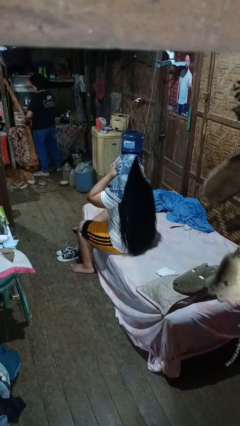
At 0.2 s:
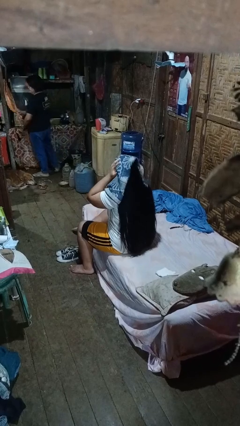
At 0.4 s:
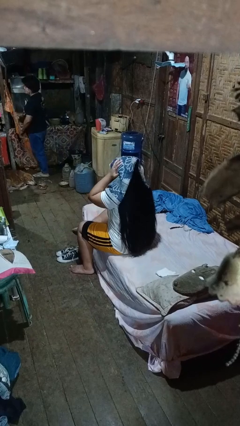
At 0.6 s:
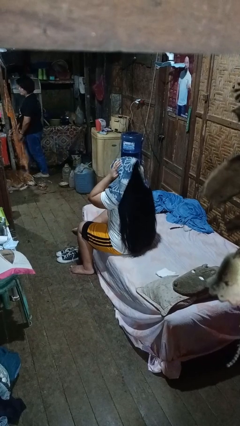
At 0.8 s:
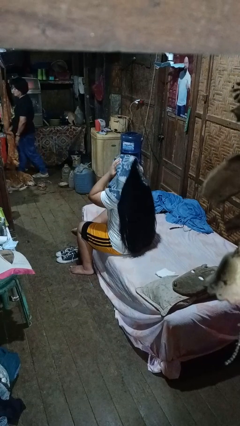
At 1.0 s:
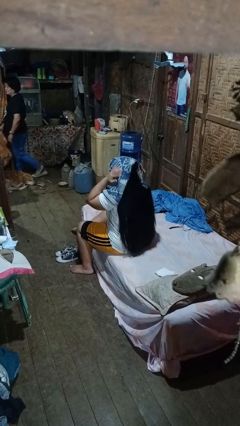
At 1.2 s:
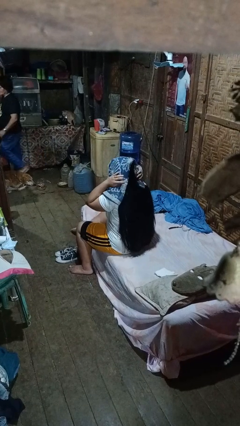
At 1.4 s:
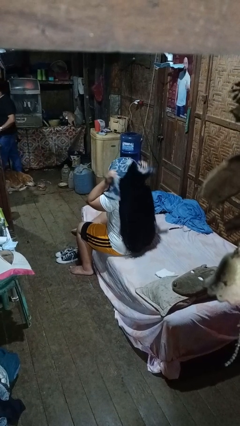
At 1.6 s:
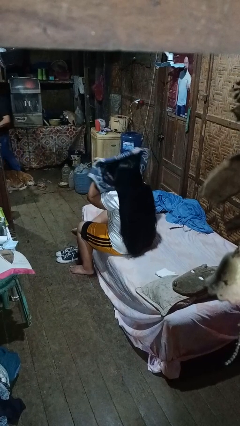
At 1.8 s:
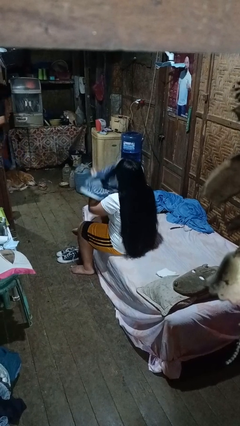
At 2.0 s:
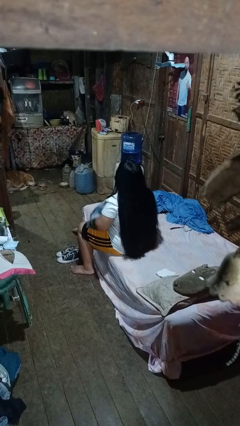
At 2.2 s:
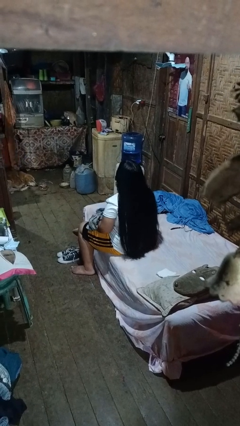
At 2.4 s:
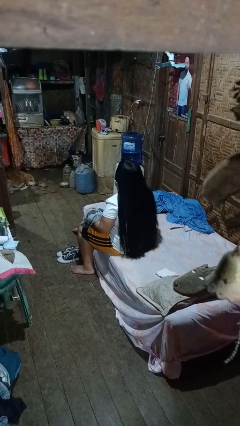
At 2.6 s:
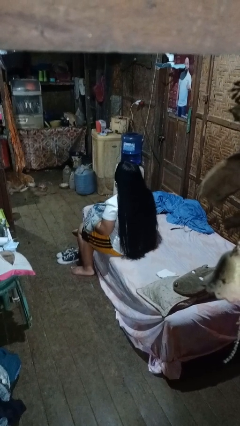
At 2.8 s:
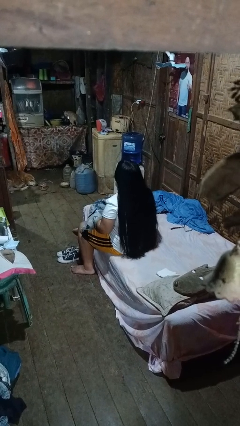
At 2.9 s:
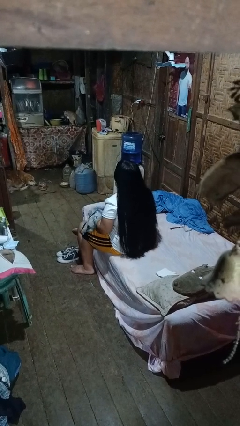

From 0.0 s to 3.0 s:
person dries hair with towel

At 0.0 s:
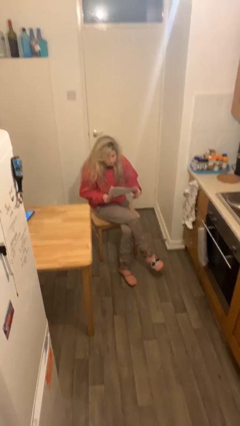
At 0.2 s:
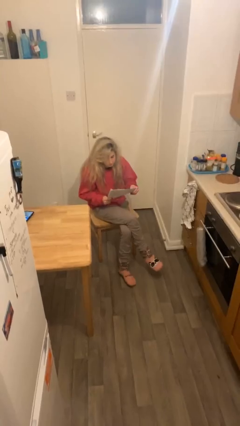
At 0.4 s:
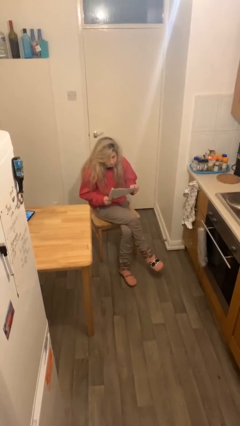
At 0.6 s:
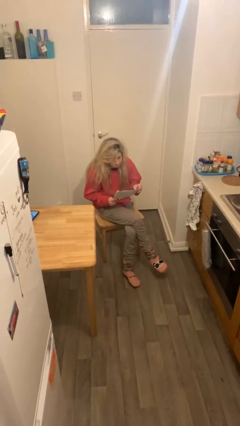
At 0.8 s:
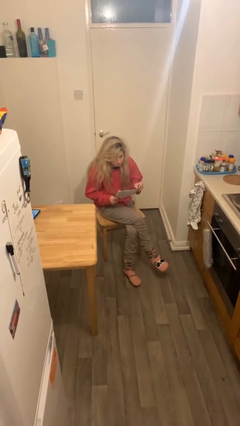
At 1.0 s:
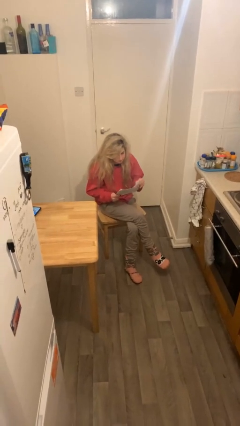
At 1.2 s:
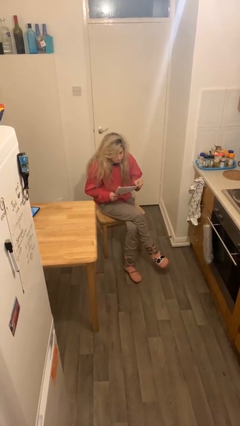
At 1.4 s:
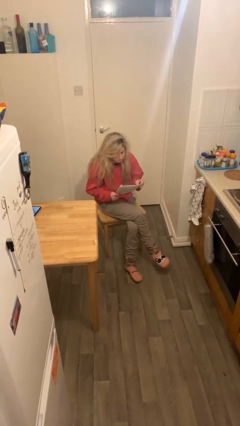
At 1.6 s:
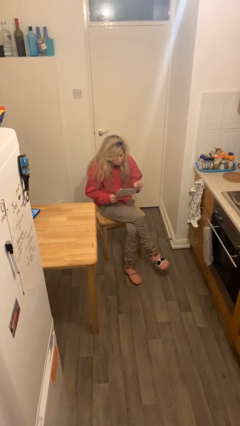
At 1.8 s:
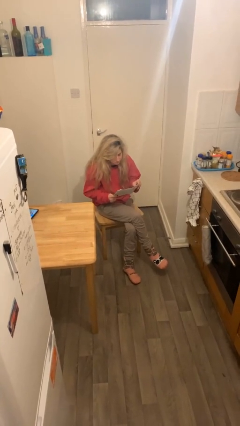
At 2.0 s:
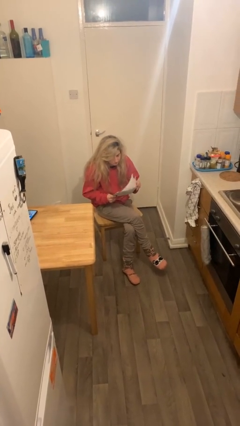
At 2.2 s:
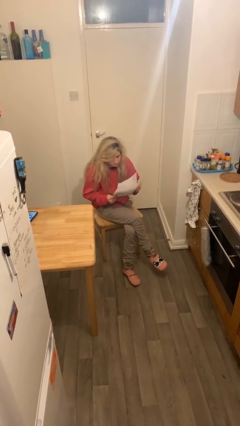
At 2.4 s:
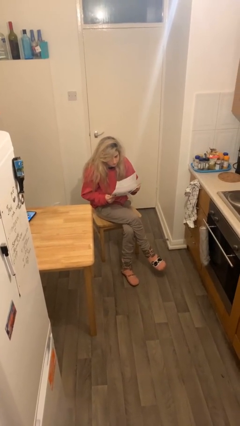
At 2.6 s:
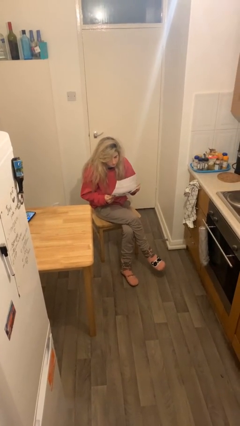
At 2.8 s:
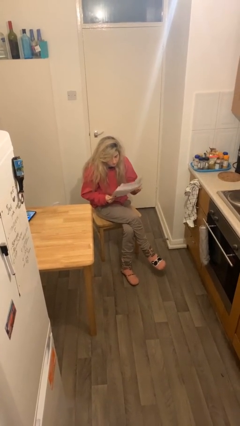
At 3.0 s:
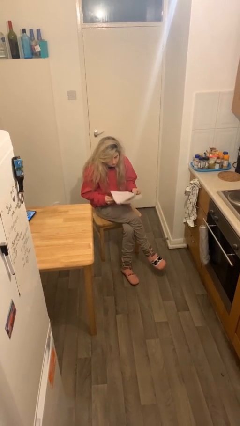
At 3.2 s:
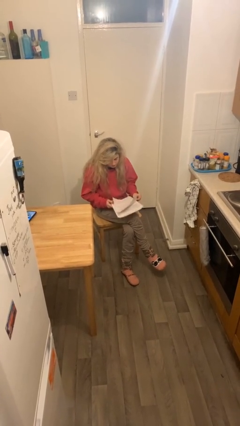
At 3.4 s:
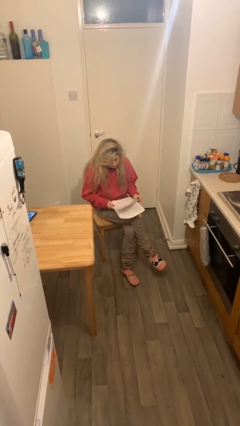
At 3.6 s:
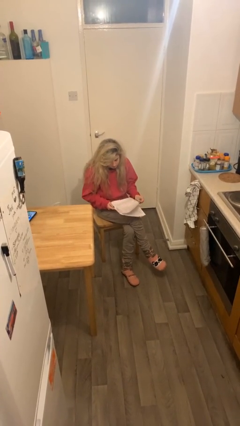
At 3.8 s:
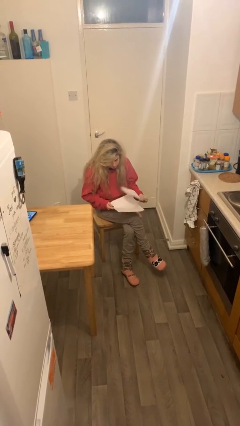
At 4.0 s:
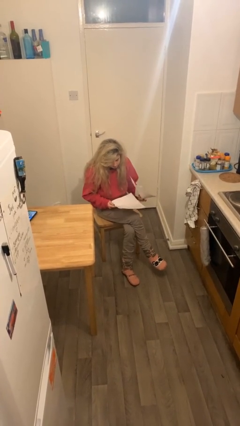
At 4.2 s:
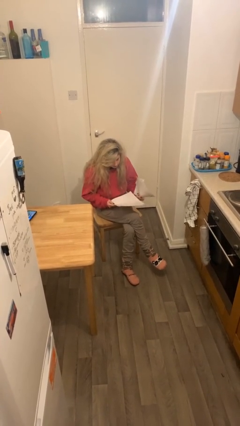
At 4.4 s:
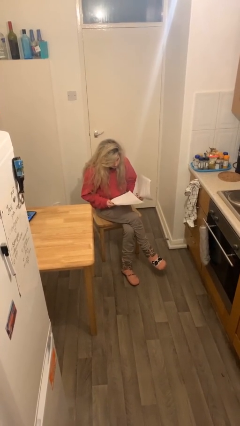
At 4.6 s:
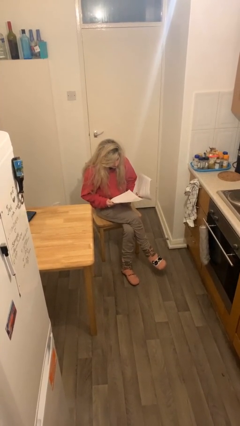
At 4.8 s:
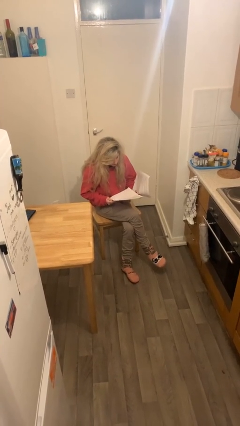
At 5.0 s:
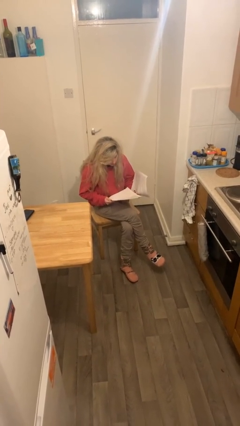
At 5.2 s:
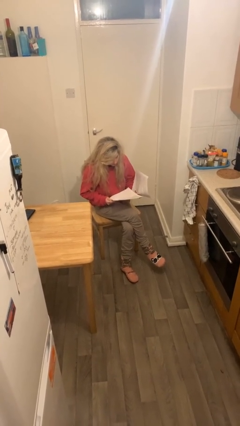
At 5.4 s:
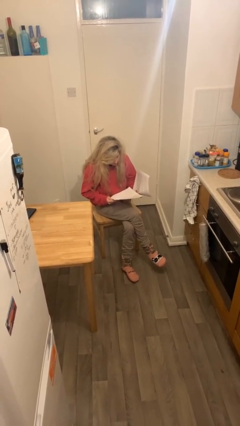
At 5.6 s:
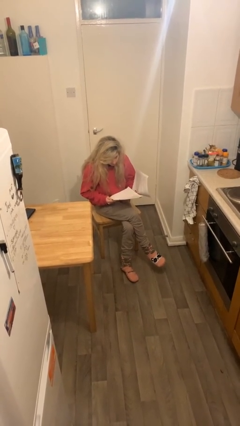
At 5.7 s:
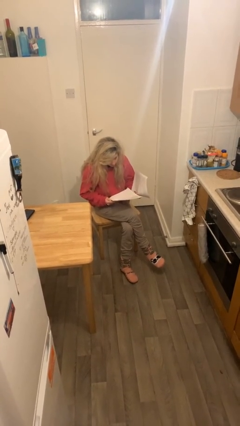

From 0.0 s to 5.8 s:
person reads document

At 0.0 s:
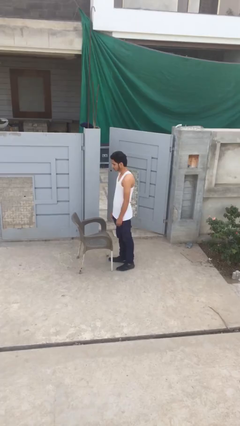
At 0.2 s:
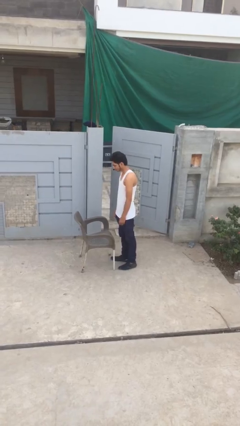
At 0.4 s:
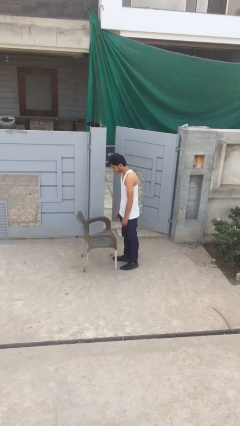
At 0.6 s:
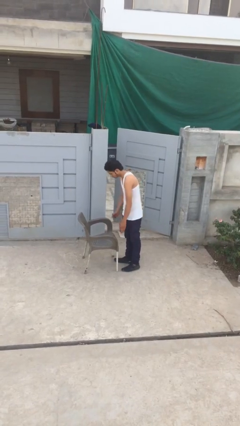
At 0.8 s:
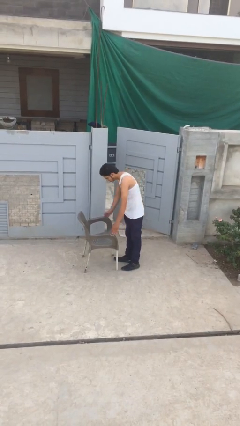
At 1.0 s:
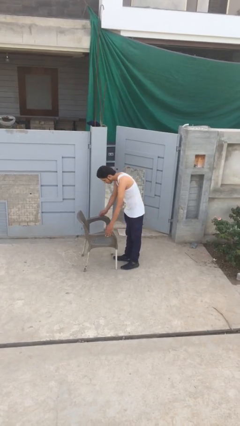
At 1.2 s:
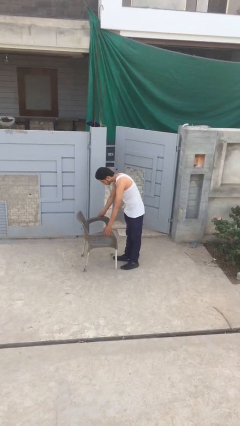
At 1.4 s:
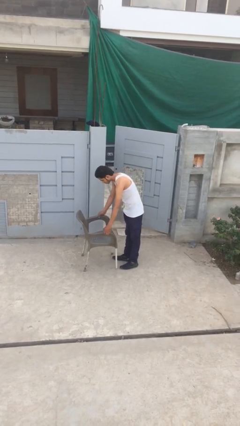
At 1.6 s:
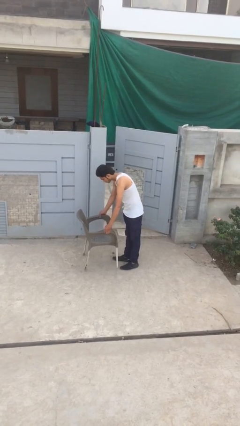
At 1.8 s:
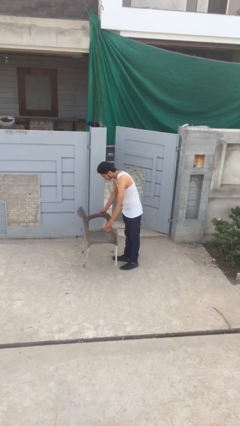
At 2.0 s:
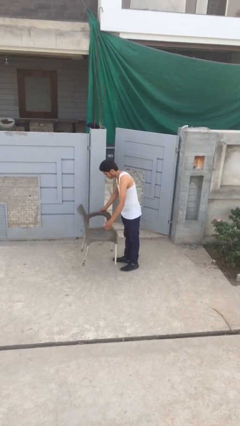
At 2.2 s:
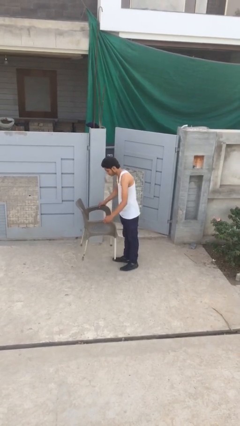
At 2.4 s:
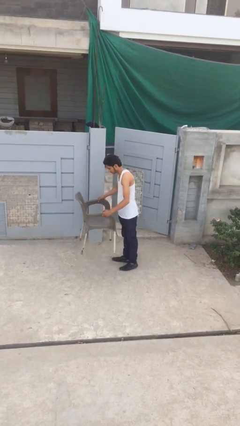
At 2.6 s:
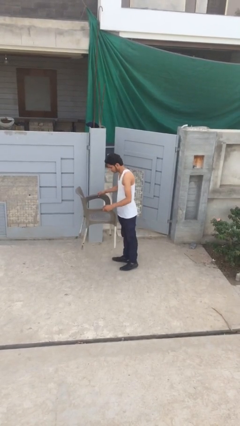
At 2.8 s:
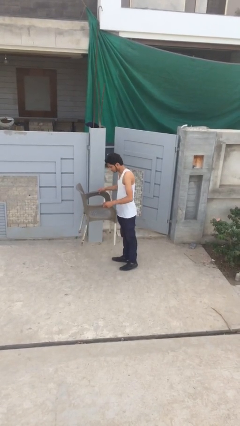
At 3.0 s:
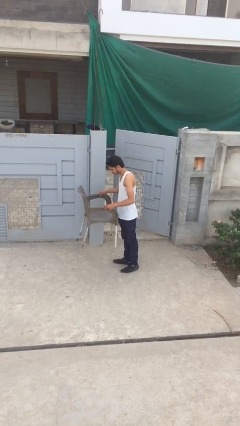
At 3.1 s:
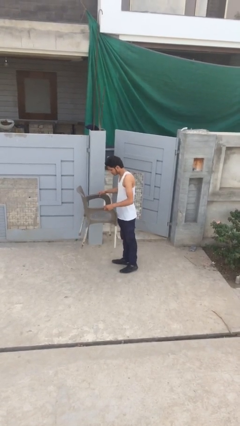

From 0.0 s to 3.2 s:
person picks up object from floor

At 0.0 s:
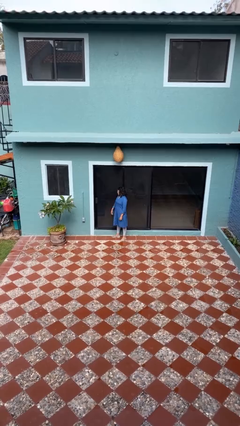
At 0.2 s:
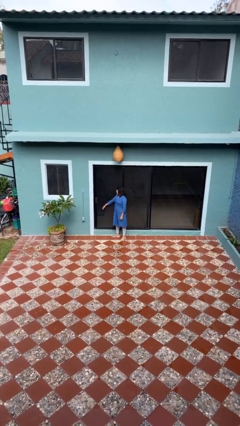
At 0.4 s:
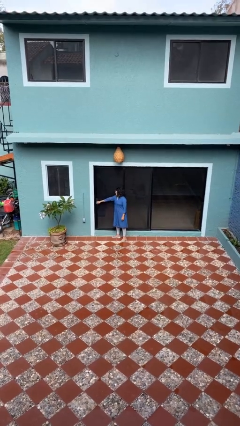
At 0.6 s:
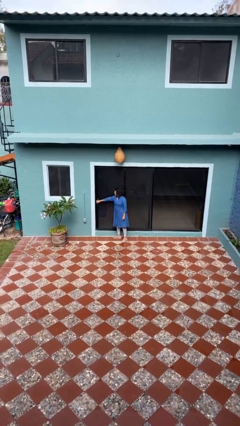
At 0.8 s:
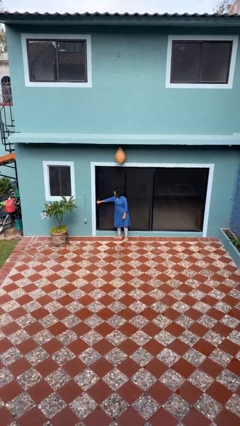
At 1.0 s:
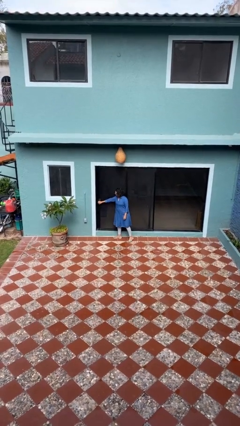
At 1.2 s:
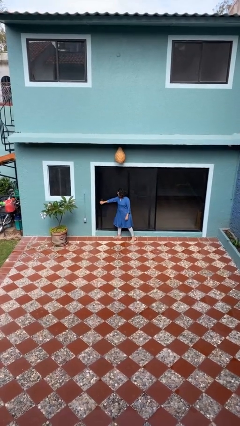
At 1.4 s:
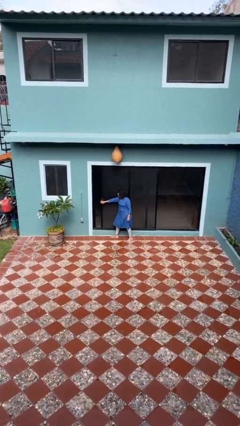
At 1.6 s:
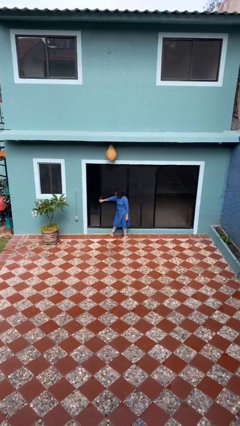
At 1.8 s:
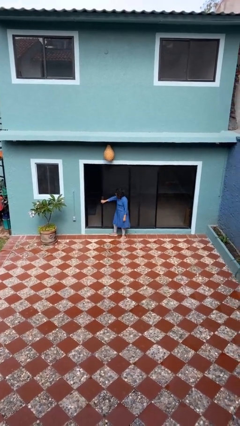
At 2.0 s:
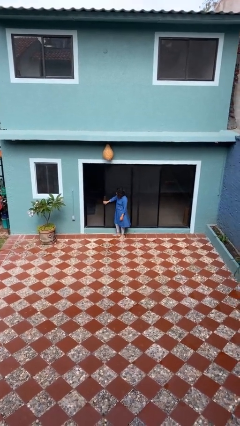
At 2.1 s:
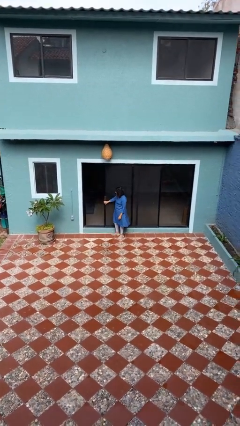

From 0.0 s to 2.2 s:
person opens sliding door

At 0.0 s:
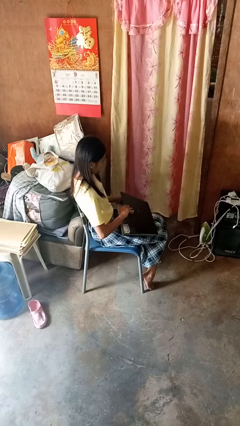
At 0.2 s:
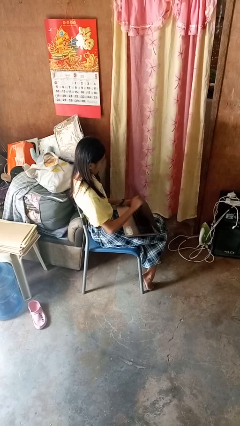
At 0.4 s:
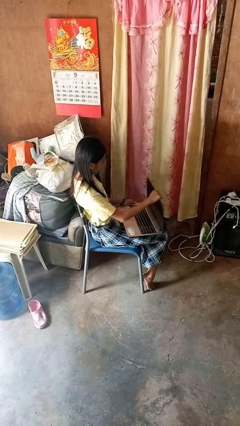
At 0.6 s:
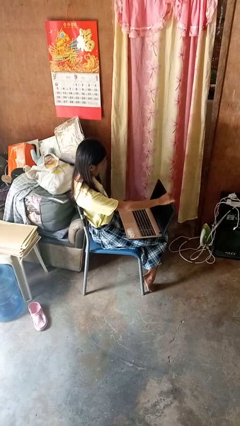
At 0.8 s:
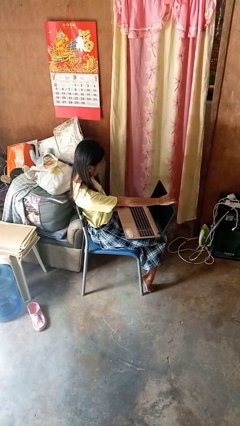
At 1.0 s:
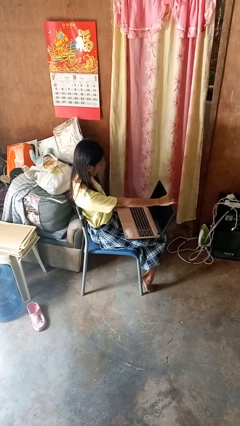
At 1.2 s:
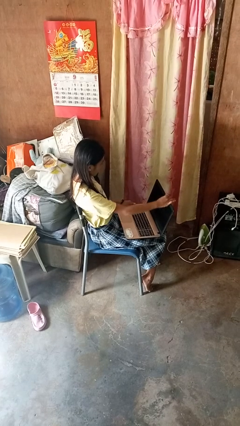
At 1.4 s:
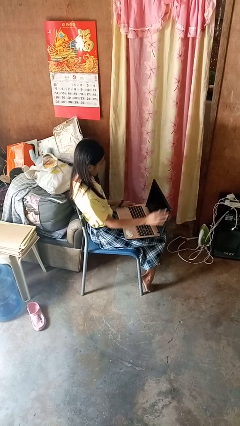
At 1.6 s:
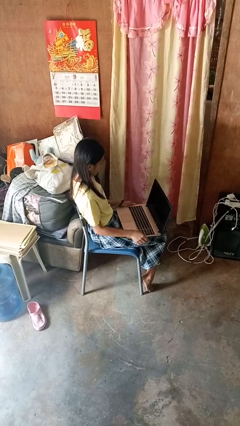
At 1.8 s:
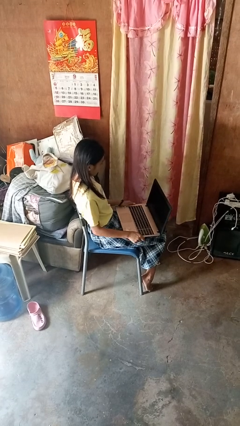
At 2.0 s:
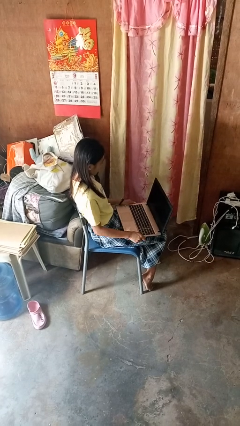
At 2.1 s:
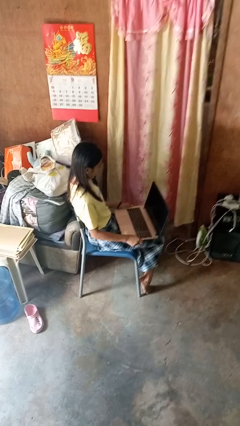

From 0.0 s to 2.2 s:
person opens laptop

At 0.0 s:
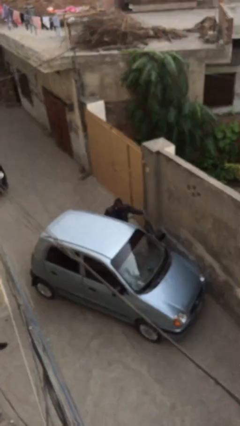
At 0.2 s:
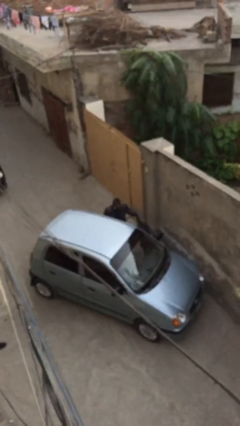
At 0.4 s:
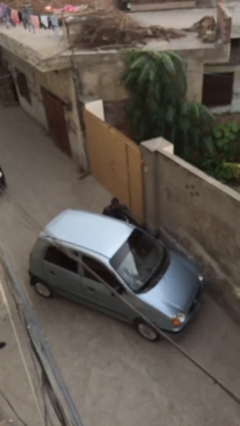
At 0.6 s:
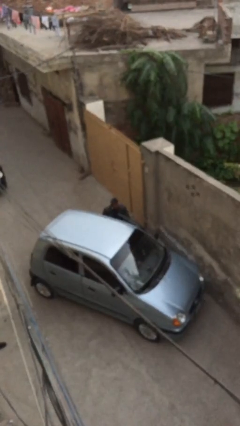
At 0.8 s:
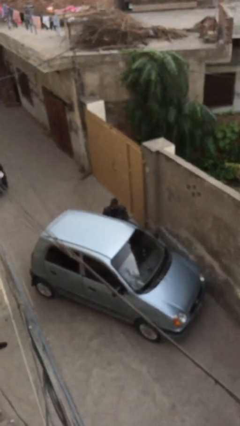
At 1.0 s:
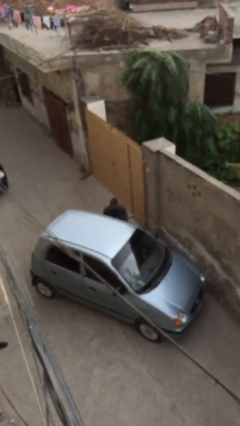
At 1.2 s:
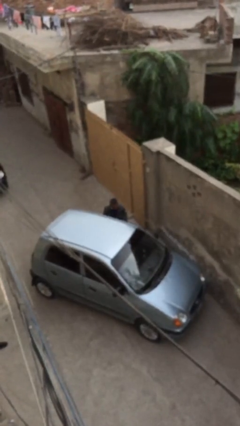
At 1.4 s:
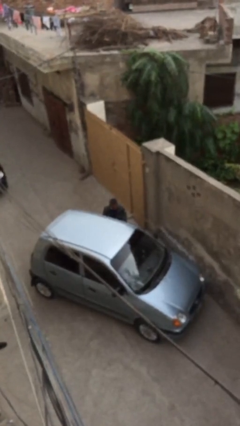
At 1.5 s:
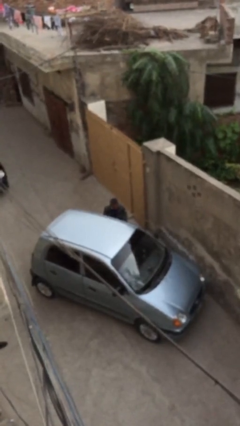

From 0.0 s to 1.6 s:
person closes car door
